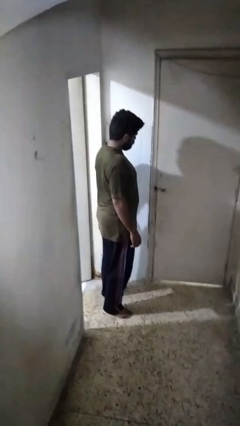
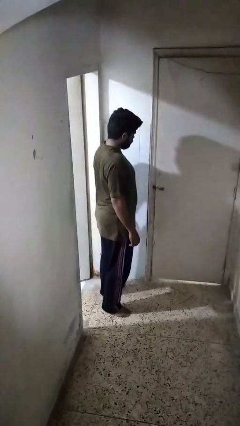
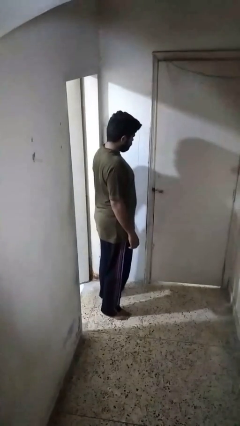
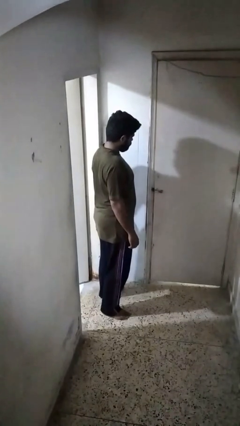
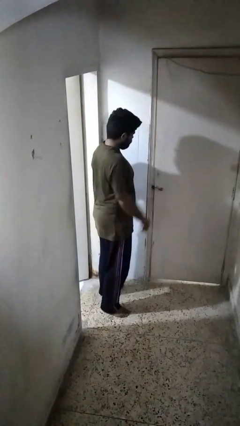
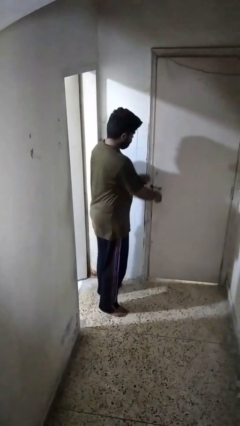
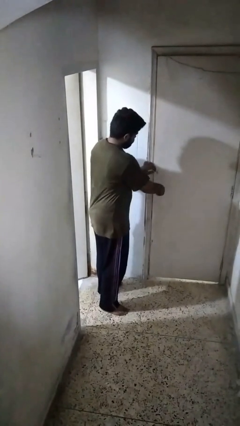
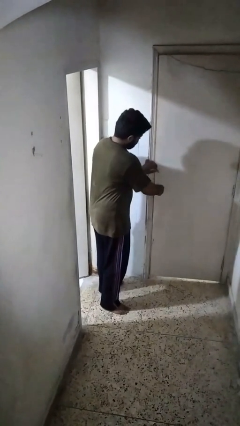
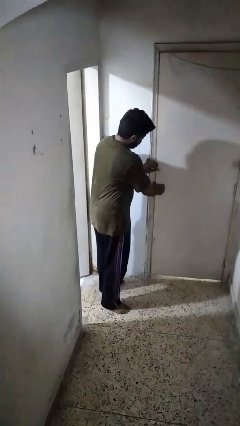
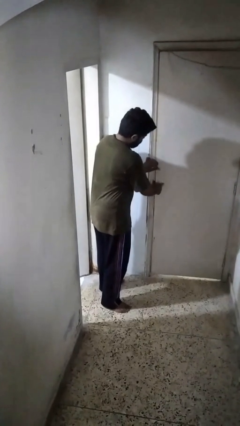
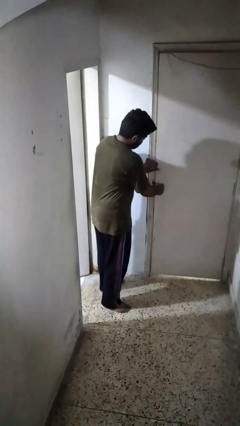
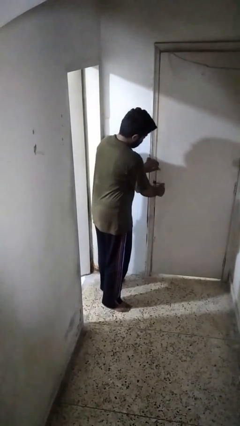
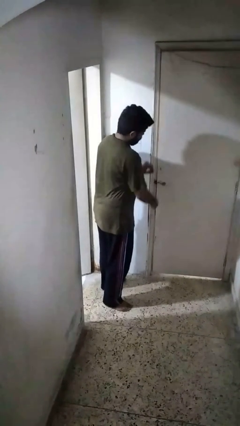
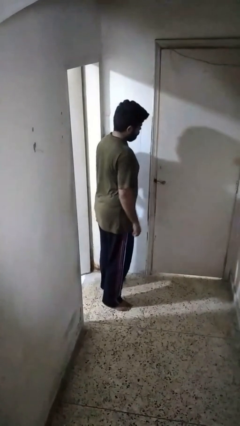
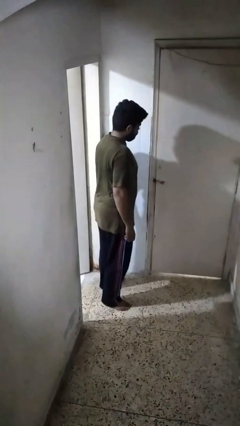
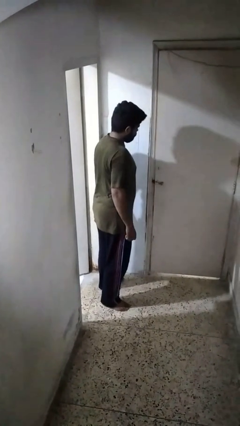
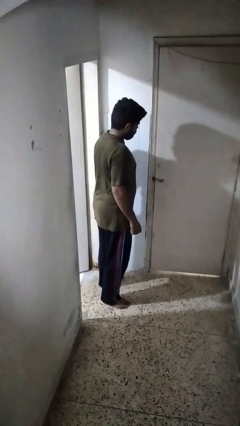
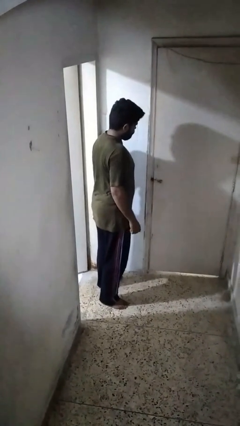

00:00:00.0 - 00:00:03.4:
person unlocks door with keys

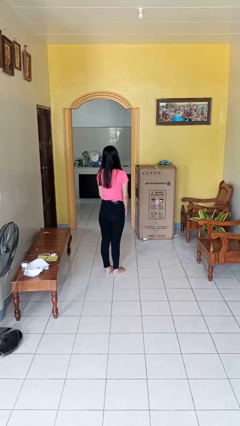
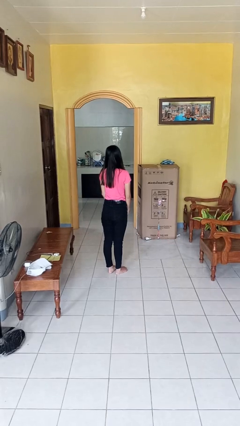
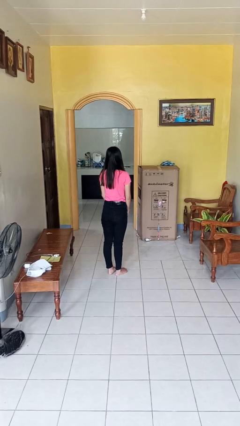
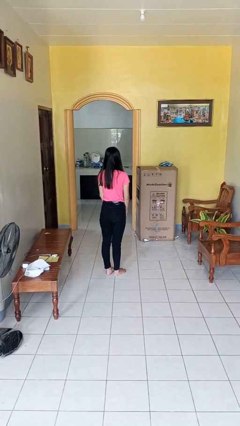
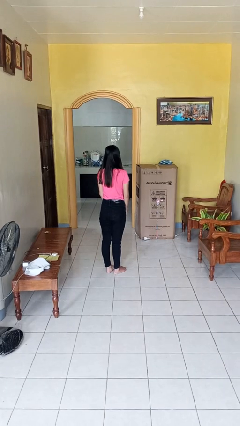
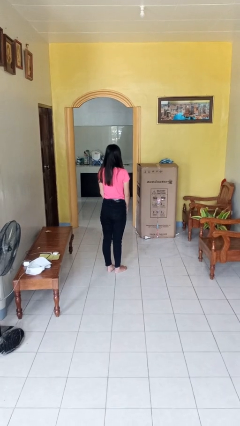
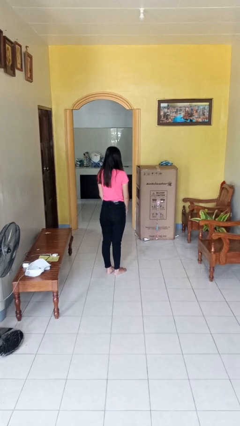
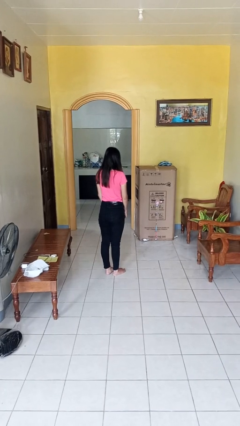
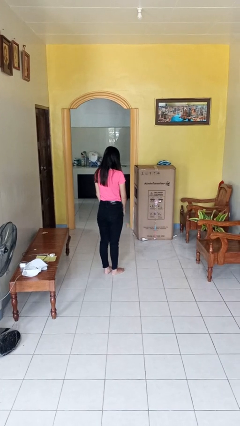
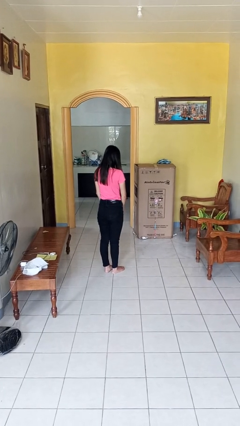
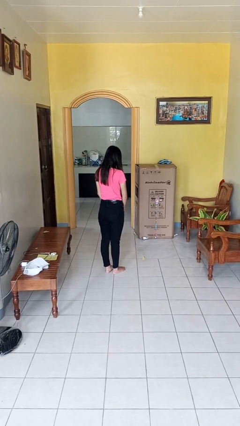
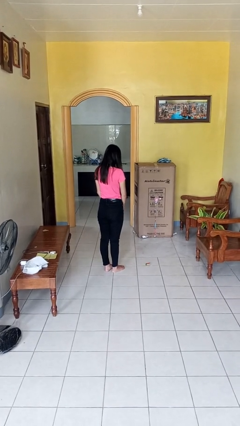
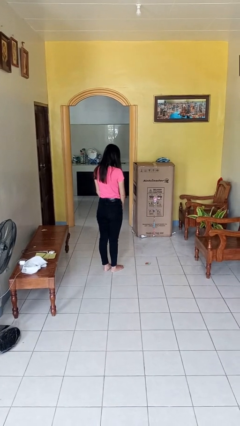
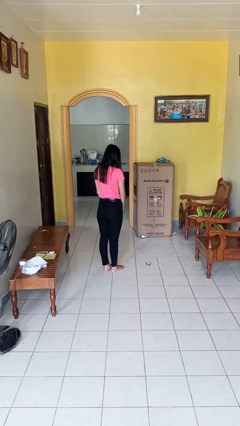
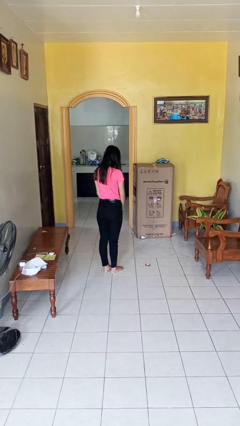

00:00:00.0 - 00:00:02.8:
person throws object to ground

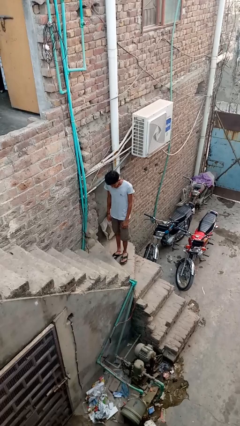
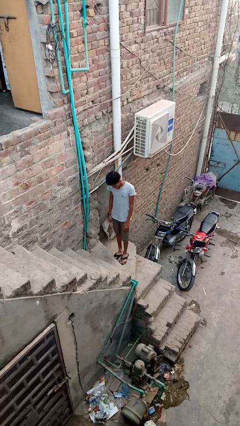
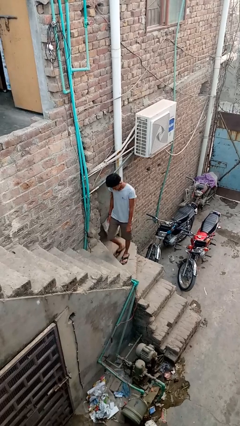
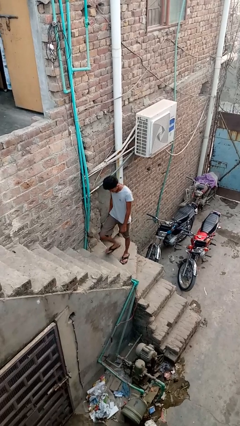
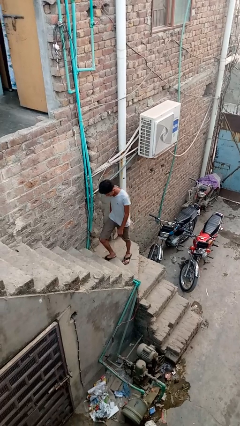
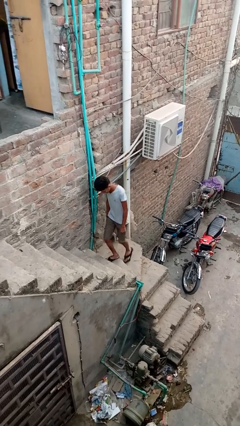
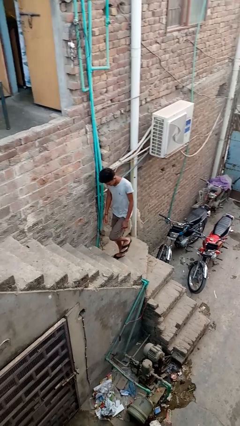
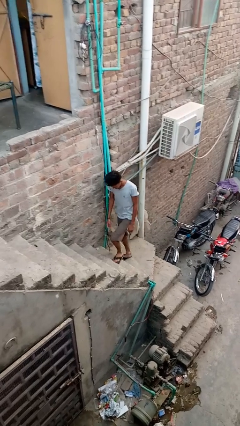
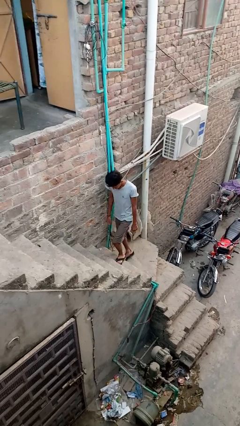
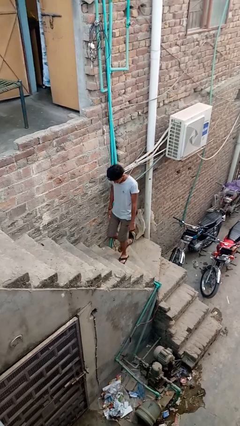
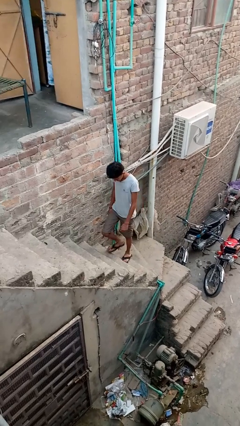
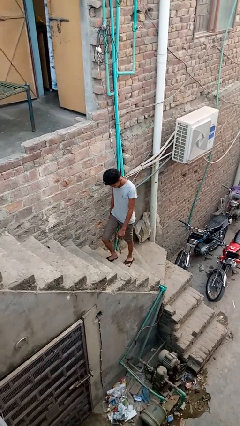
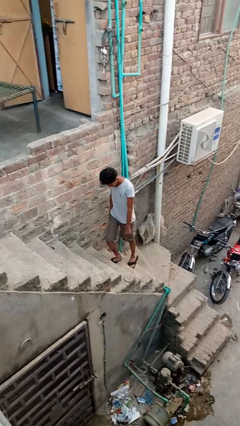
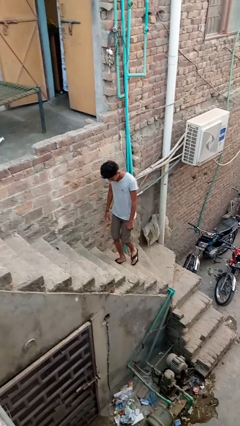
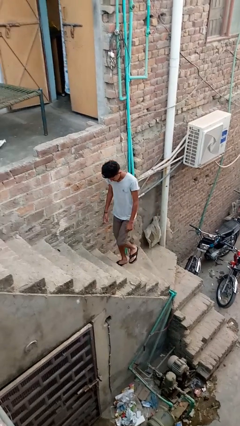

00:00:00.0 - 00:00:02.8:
person climbs up stairs

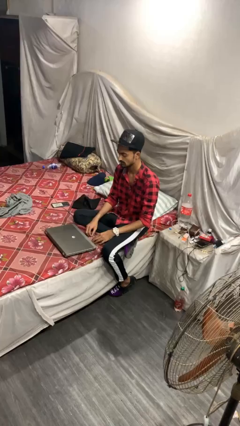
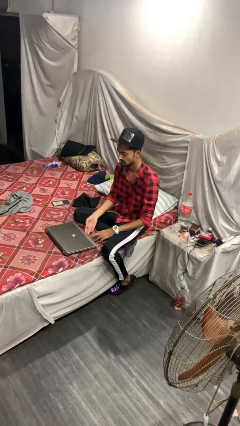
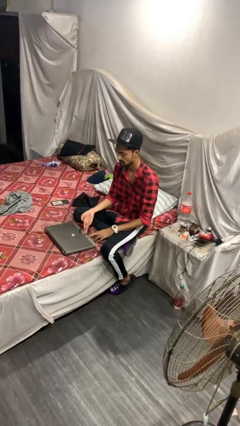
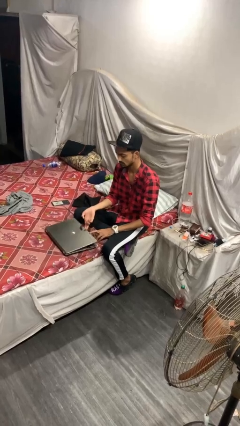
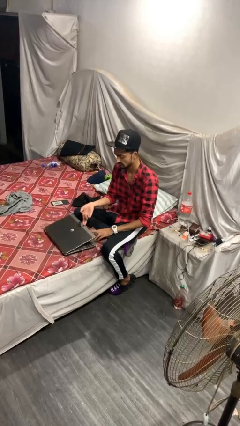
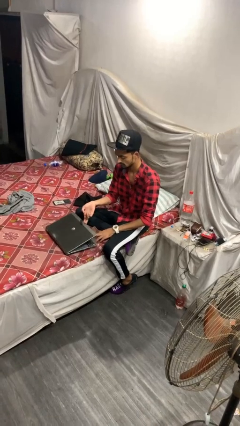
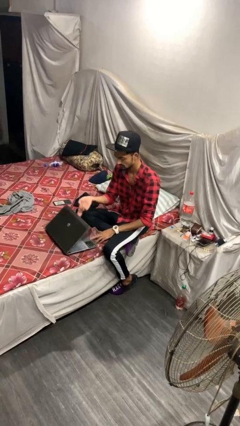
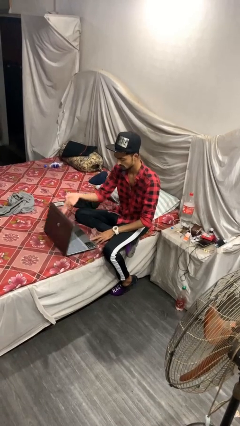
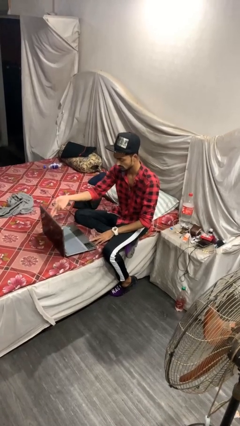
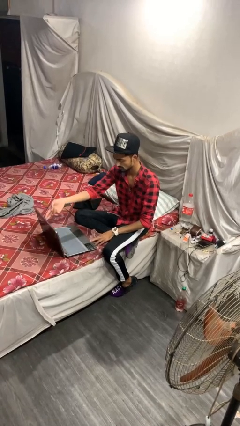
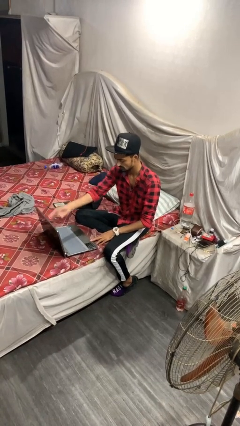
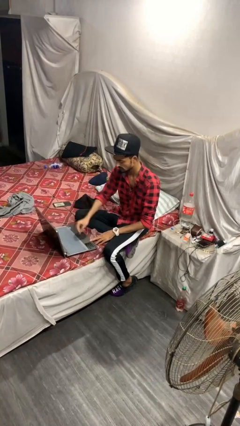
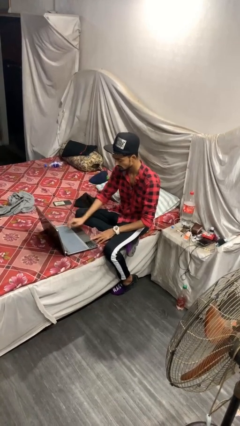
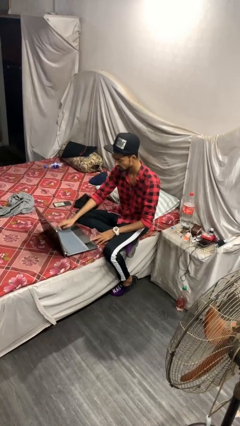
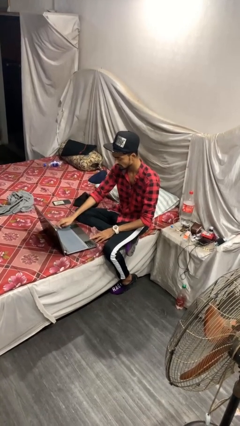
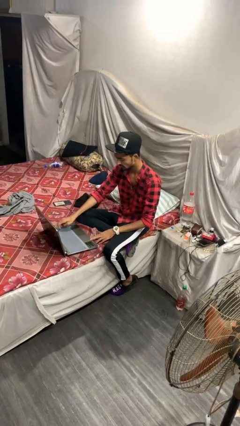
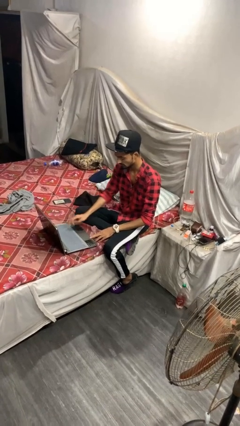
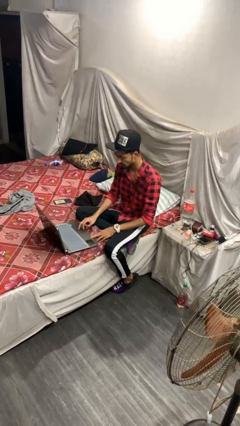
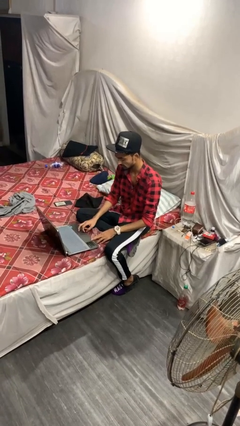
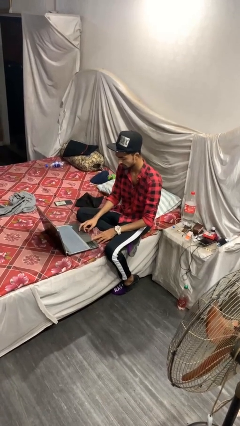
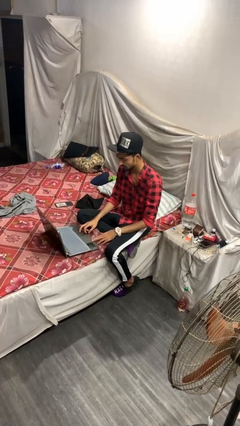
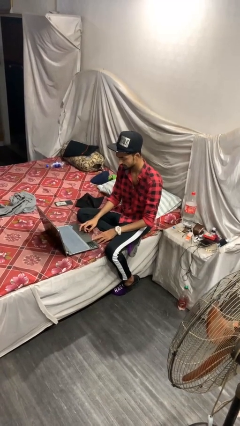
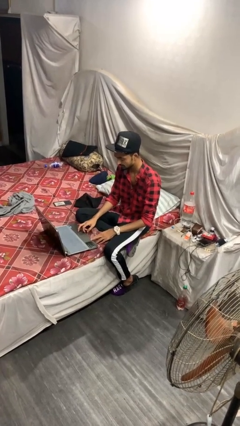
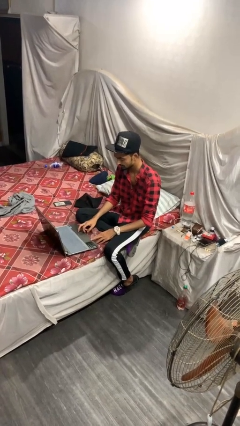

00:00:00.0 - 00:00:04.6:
person opens laptop

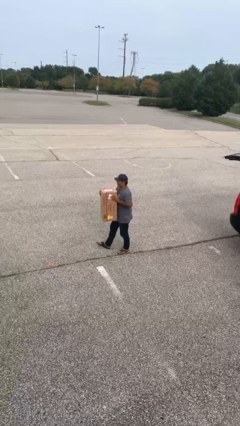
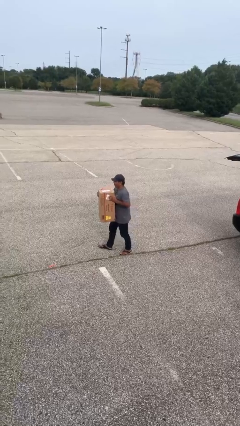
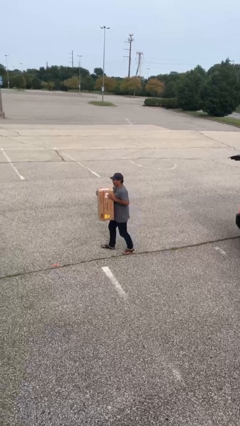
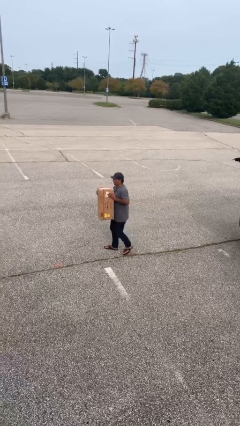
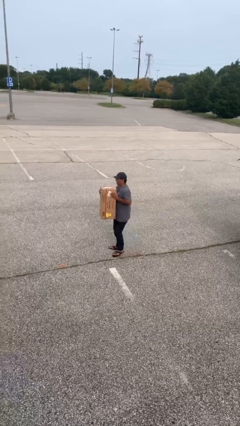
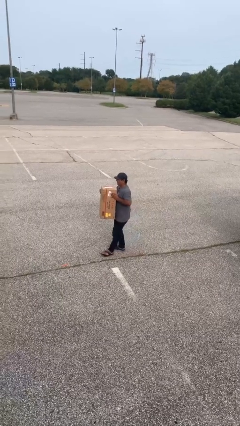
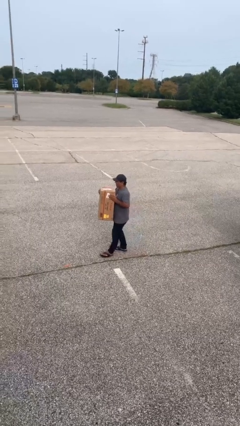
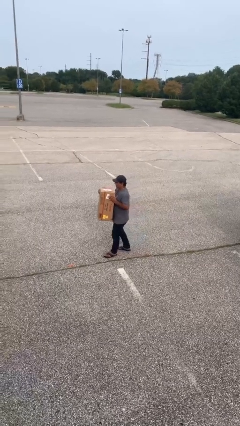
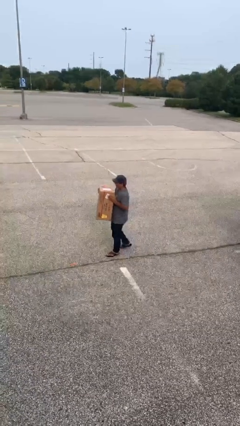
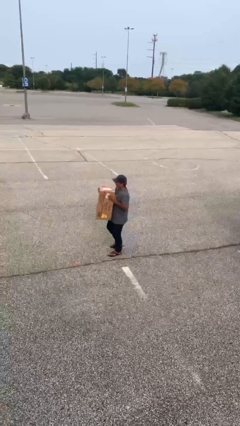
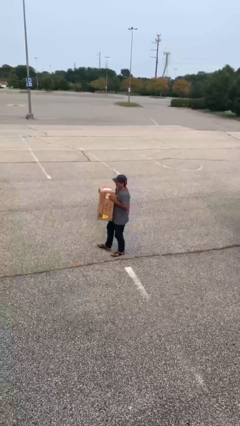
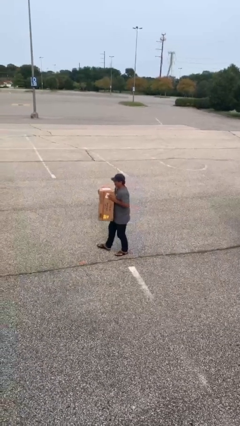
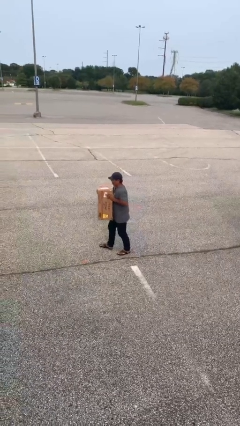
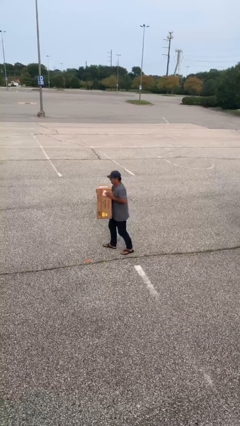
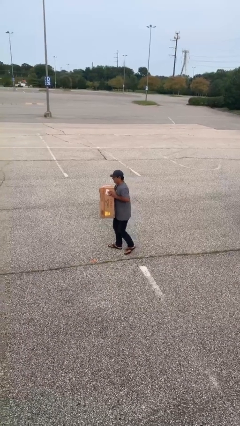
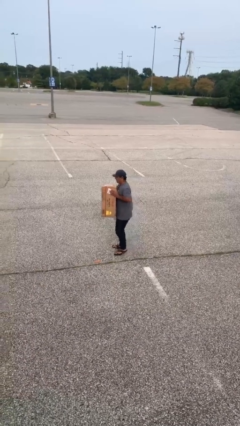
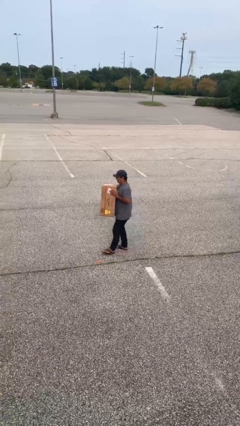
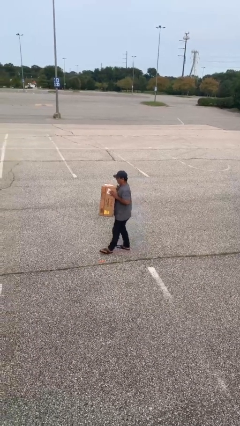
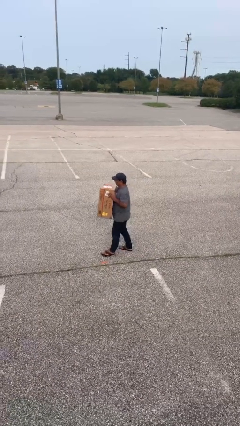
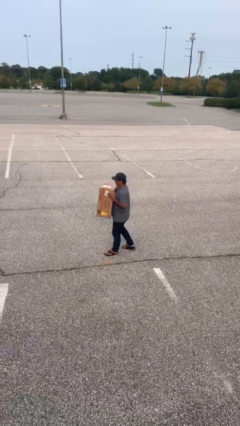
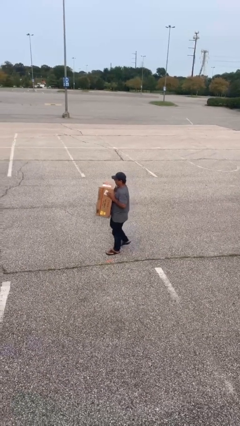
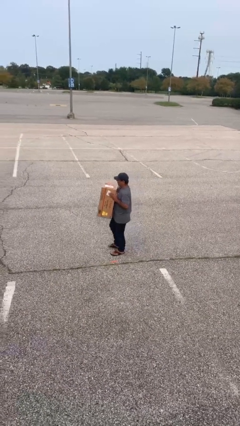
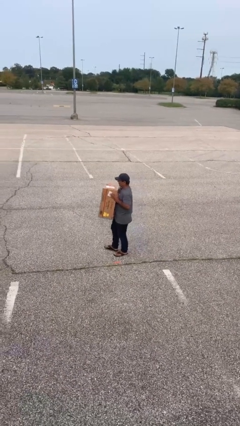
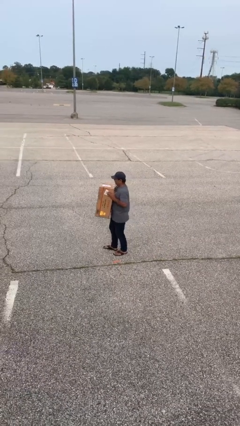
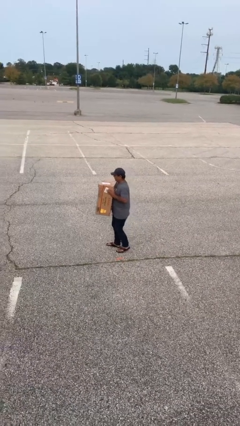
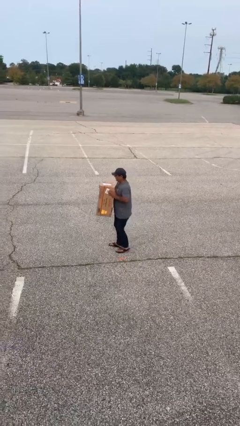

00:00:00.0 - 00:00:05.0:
person carries heavy object
